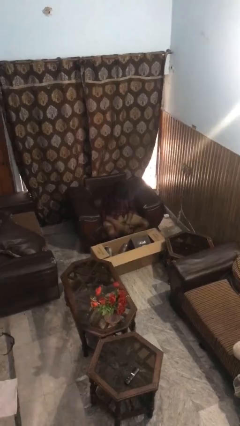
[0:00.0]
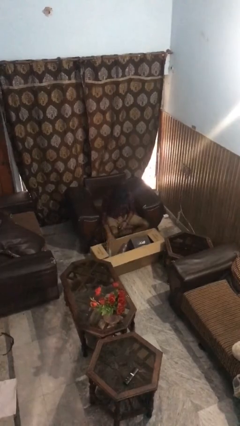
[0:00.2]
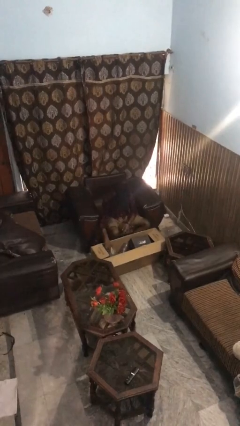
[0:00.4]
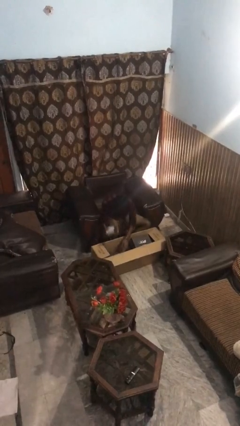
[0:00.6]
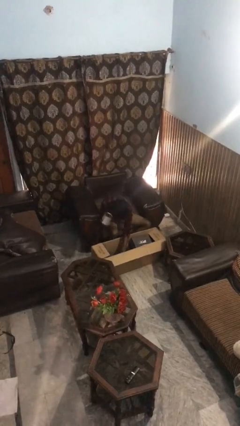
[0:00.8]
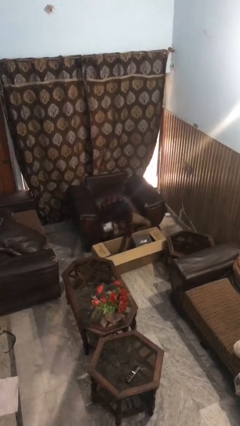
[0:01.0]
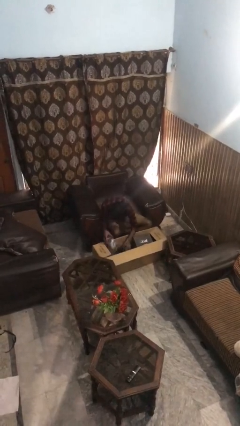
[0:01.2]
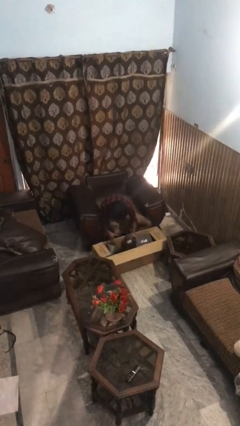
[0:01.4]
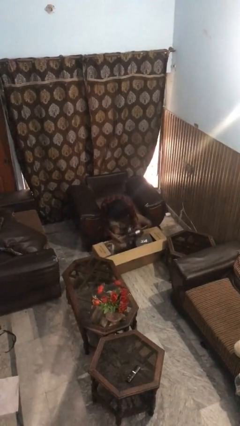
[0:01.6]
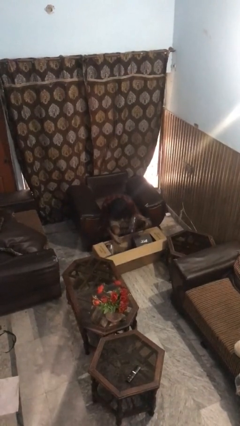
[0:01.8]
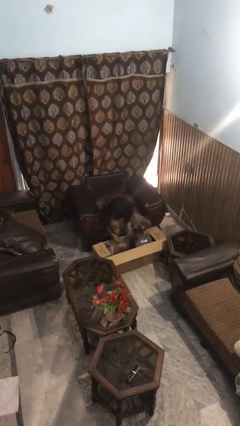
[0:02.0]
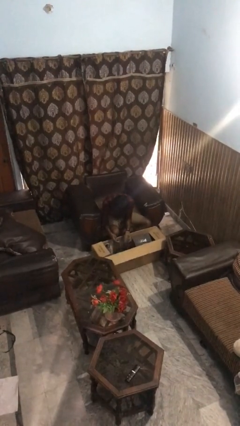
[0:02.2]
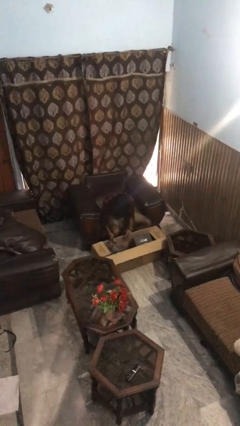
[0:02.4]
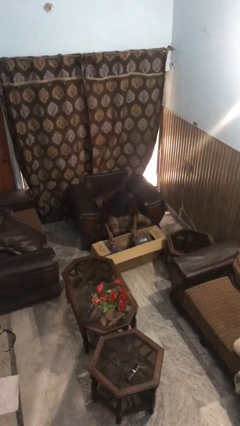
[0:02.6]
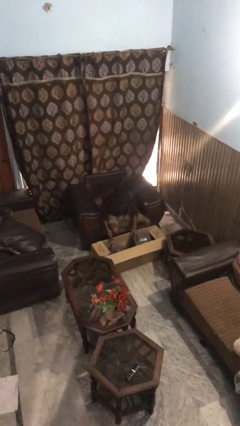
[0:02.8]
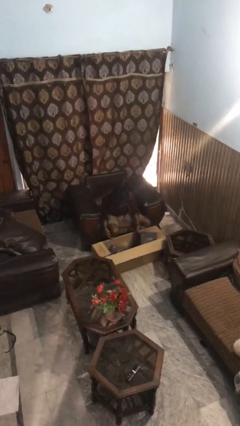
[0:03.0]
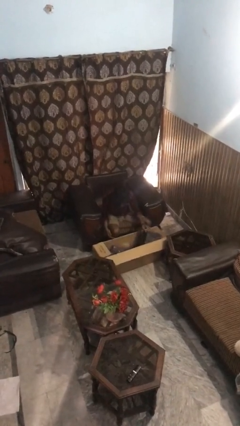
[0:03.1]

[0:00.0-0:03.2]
person searches in box

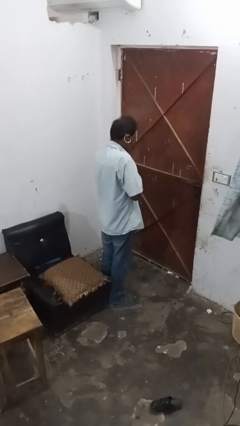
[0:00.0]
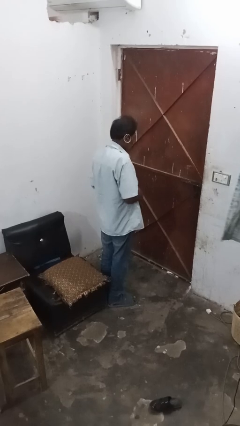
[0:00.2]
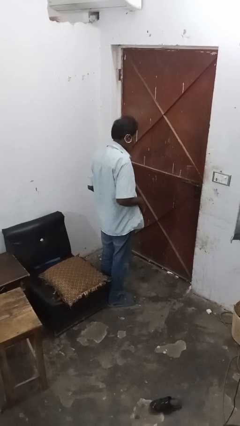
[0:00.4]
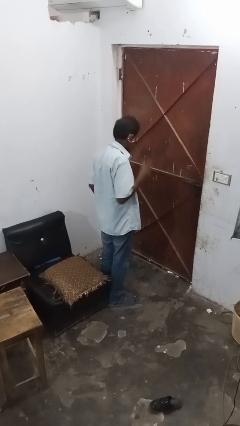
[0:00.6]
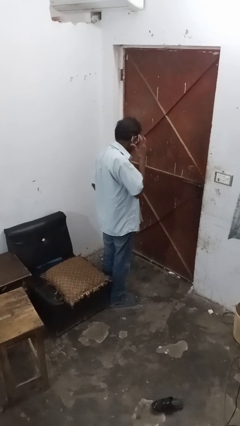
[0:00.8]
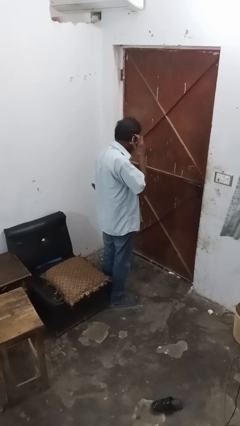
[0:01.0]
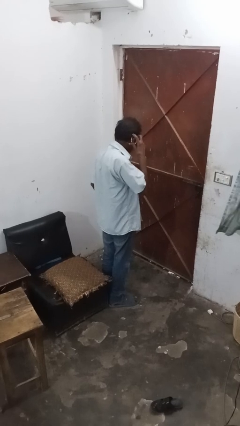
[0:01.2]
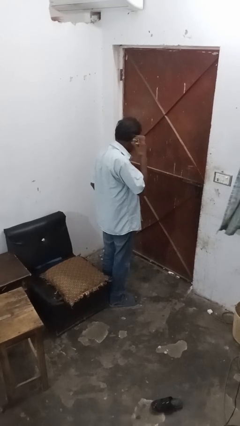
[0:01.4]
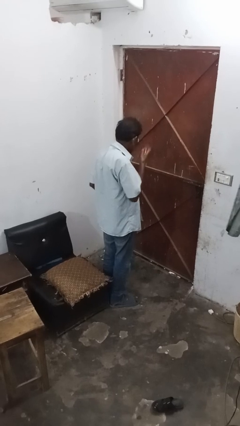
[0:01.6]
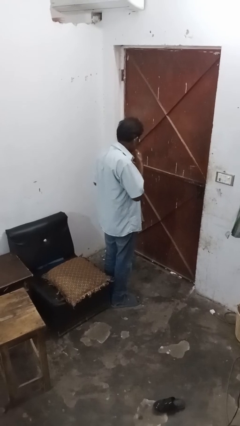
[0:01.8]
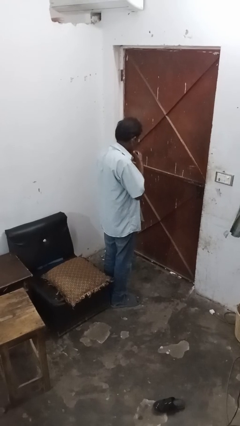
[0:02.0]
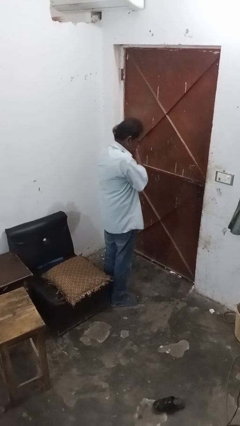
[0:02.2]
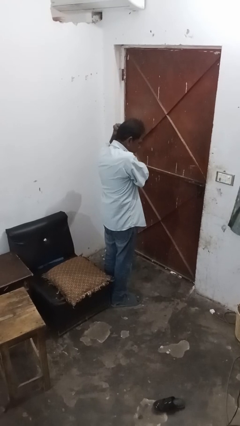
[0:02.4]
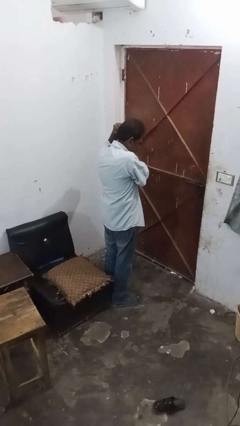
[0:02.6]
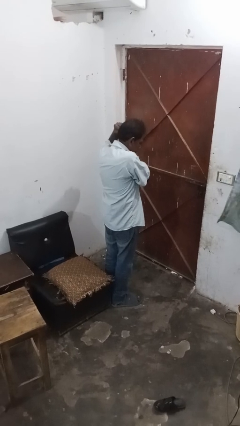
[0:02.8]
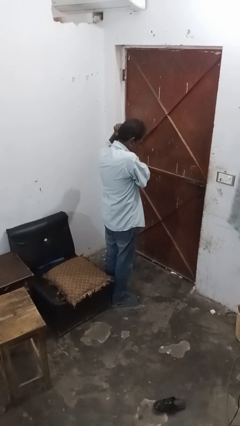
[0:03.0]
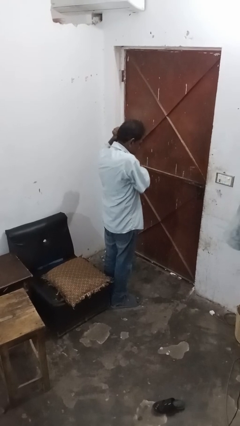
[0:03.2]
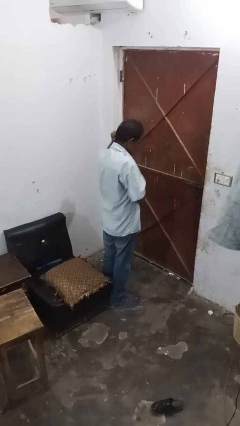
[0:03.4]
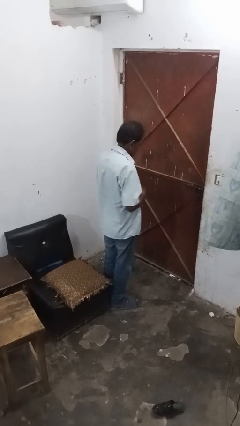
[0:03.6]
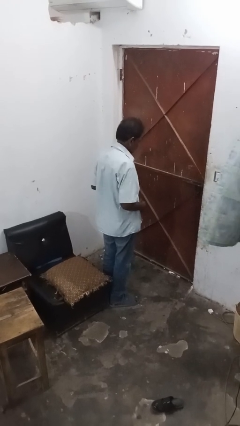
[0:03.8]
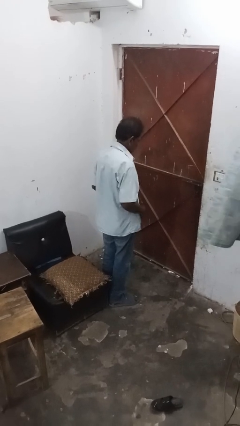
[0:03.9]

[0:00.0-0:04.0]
person takes off earrings

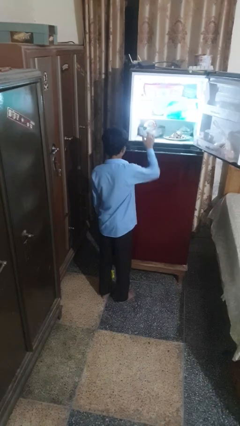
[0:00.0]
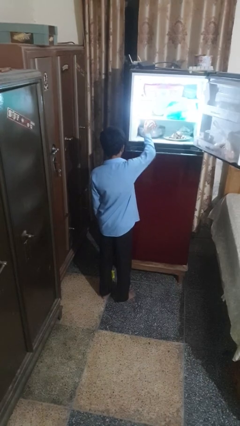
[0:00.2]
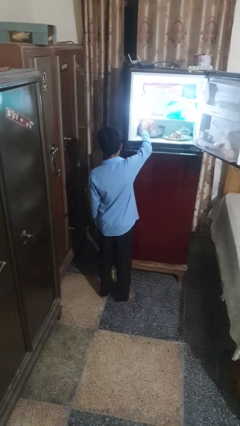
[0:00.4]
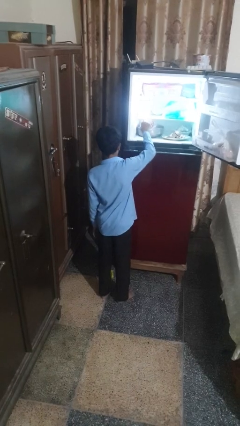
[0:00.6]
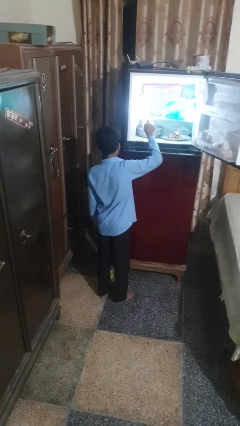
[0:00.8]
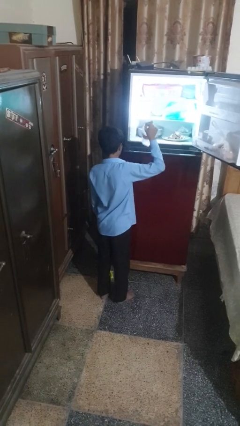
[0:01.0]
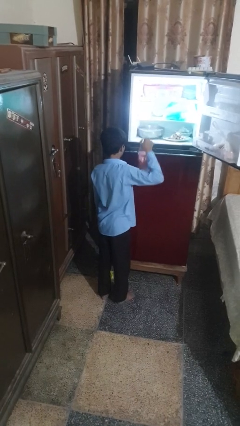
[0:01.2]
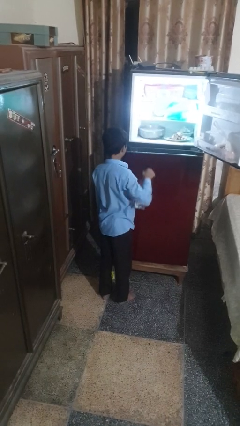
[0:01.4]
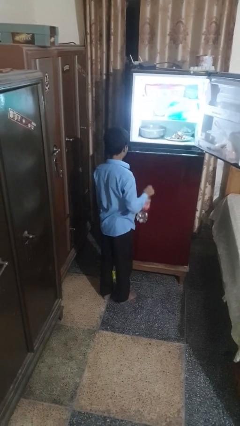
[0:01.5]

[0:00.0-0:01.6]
person takes object from refrigerator

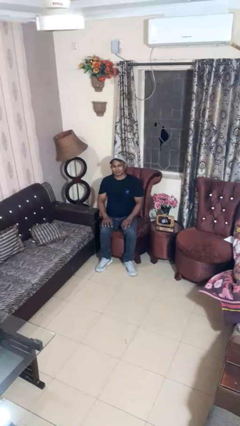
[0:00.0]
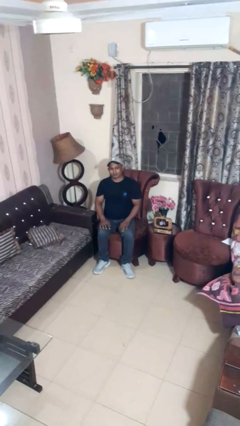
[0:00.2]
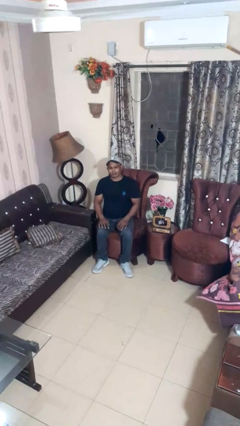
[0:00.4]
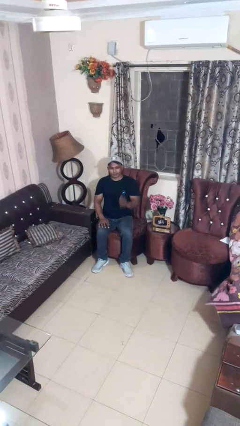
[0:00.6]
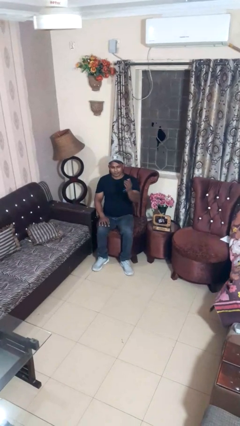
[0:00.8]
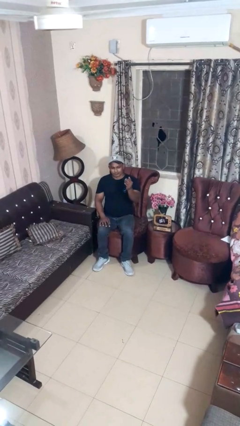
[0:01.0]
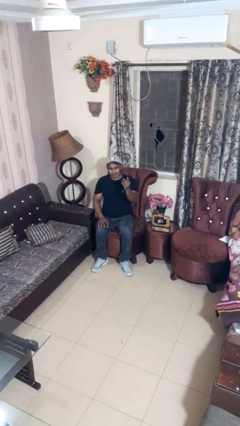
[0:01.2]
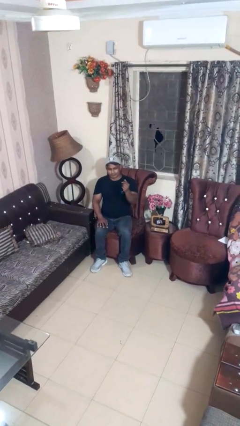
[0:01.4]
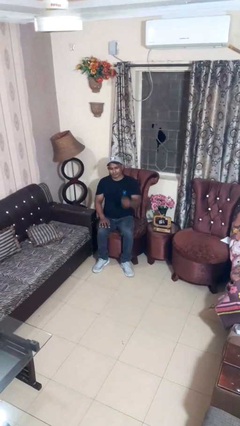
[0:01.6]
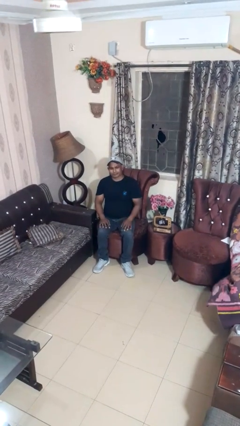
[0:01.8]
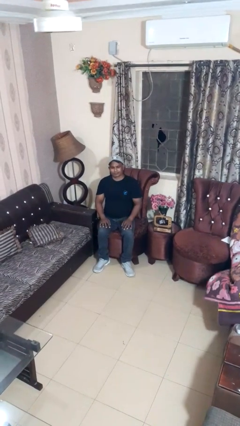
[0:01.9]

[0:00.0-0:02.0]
person gestures come here

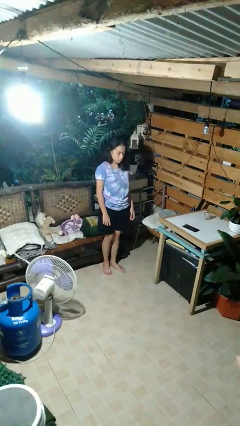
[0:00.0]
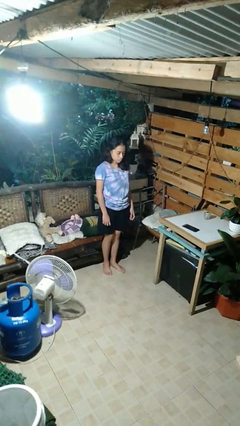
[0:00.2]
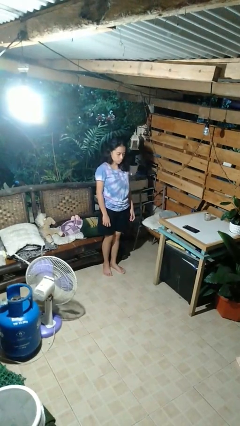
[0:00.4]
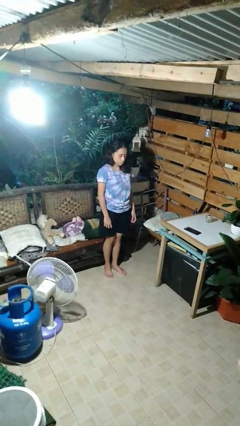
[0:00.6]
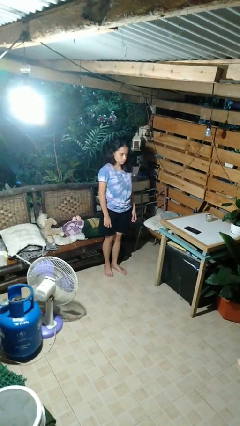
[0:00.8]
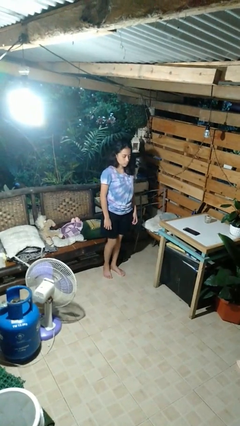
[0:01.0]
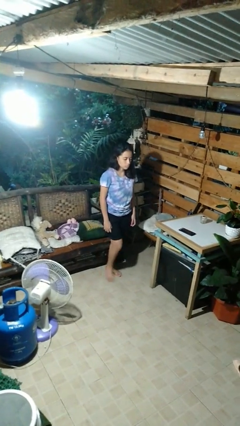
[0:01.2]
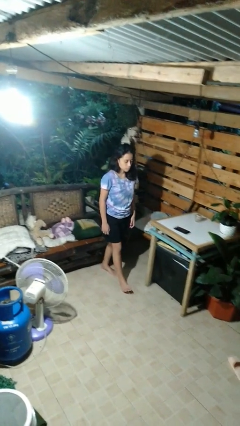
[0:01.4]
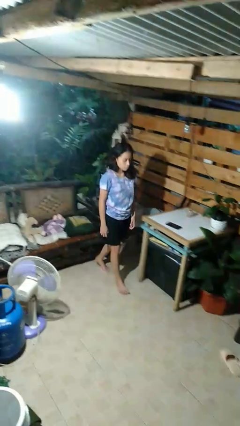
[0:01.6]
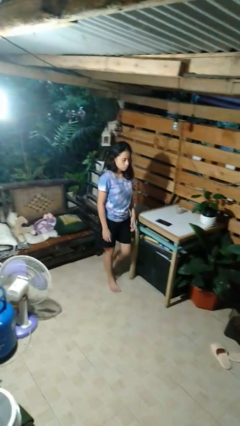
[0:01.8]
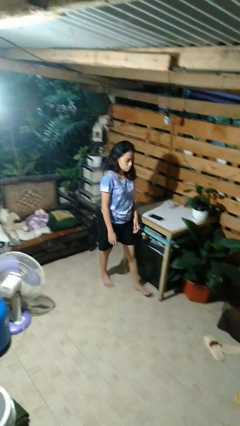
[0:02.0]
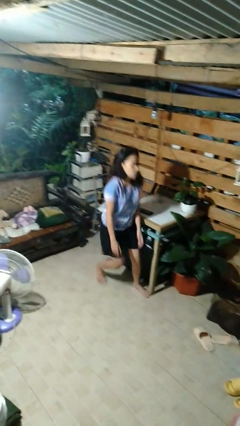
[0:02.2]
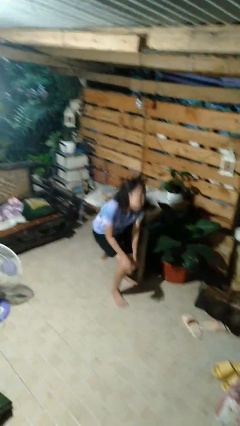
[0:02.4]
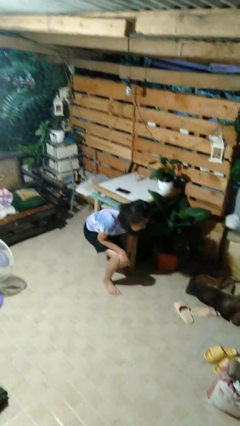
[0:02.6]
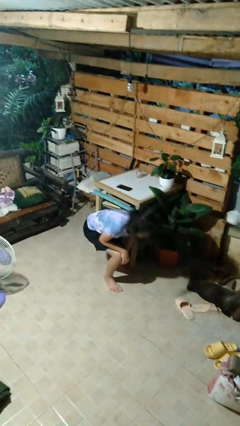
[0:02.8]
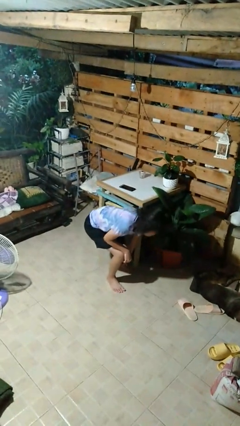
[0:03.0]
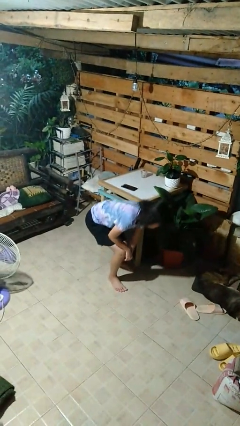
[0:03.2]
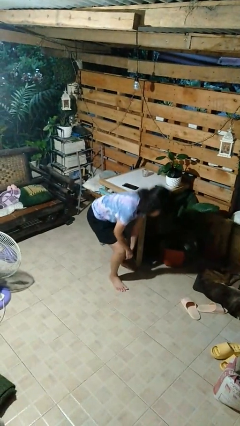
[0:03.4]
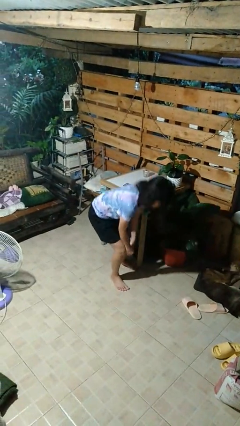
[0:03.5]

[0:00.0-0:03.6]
person stubs toe

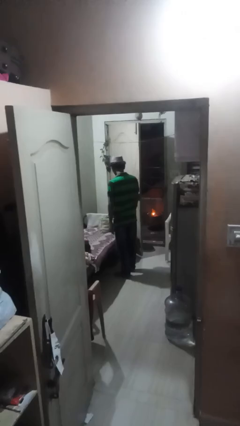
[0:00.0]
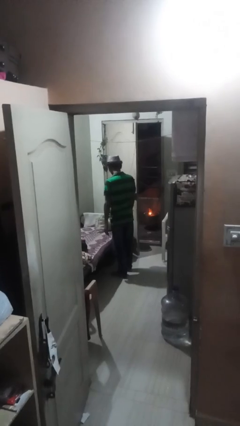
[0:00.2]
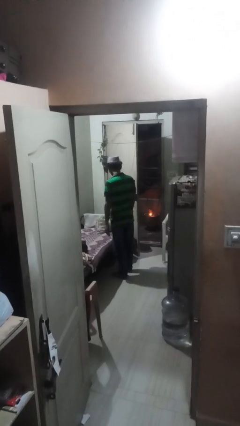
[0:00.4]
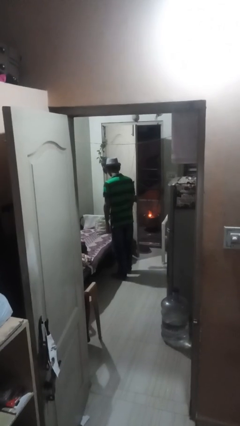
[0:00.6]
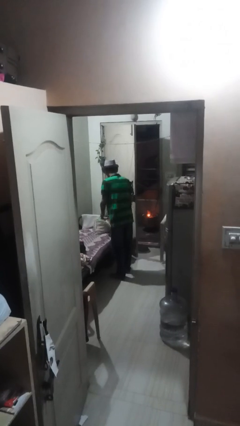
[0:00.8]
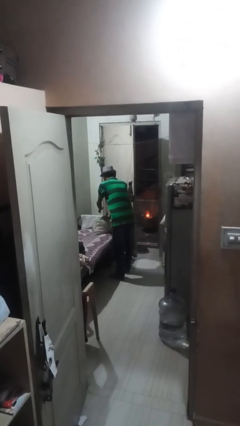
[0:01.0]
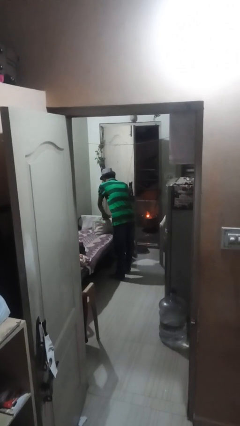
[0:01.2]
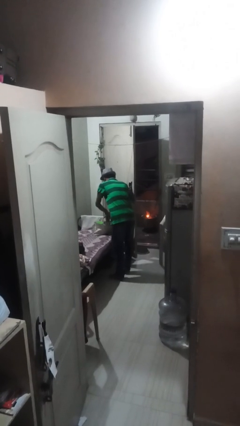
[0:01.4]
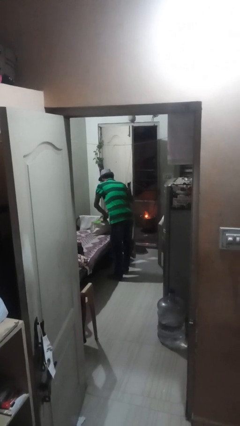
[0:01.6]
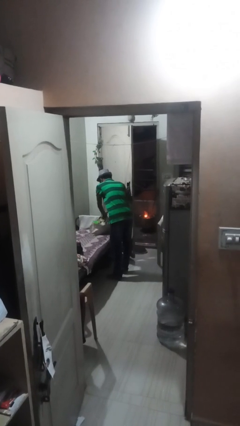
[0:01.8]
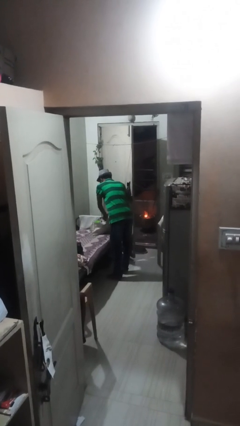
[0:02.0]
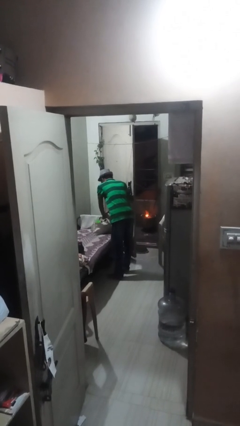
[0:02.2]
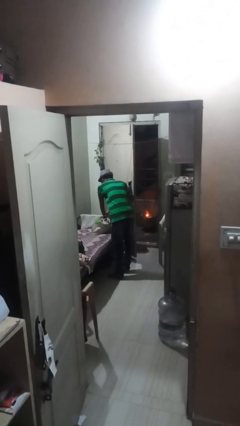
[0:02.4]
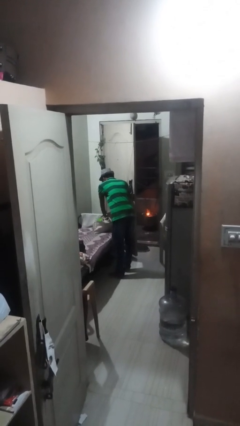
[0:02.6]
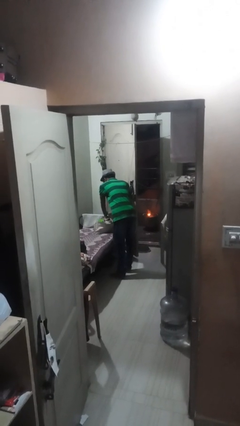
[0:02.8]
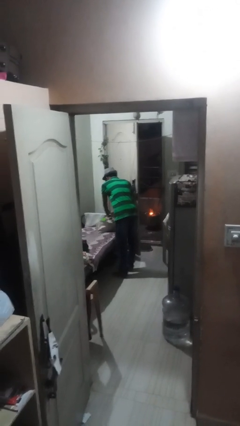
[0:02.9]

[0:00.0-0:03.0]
person searches in bag
